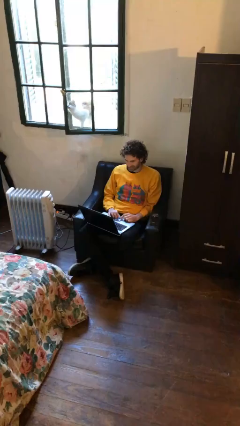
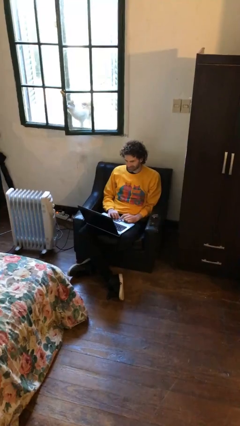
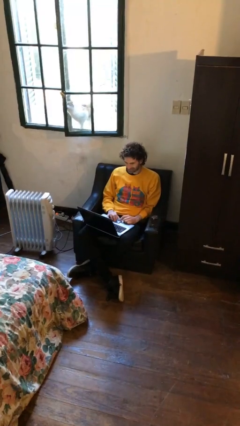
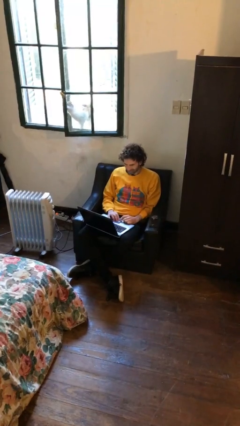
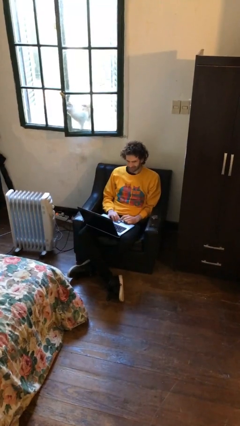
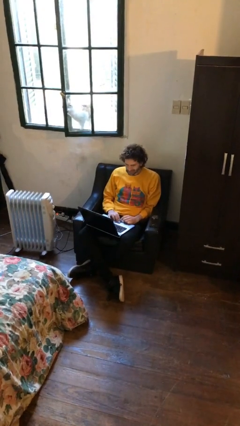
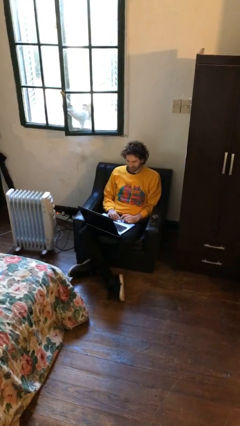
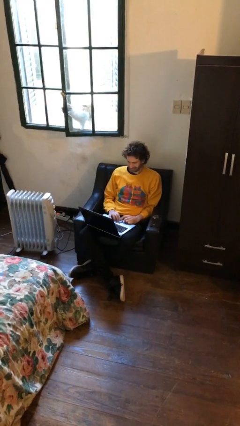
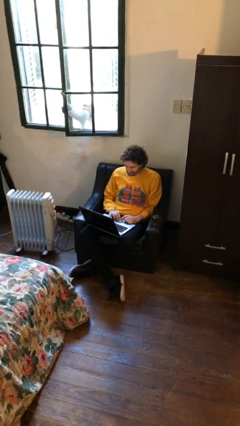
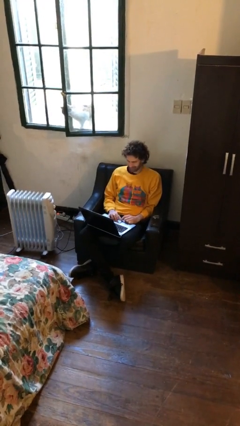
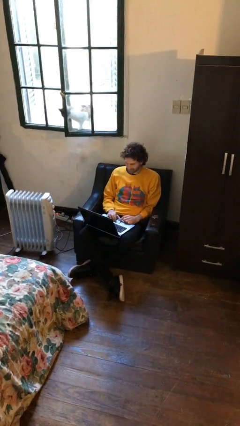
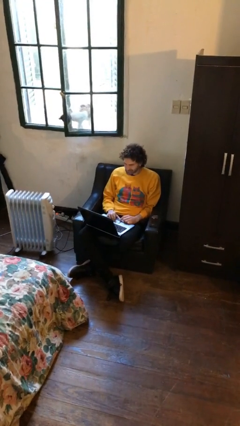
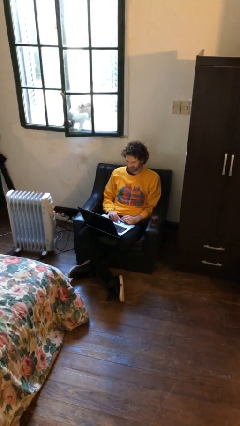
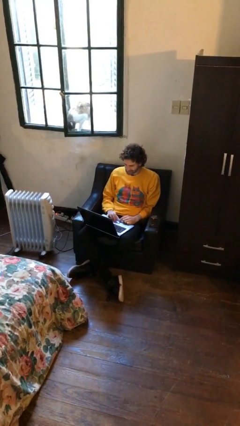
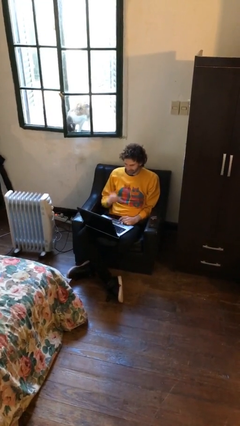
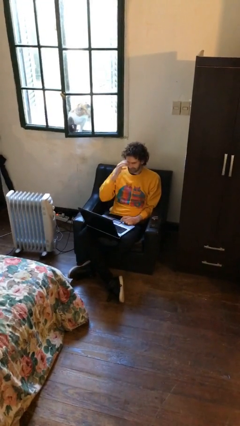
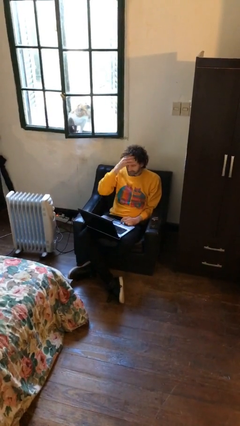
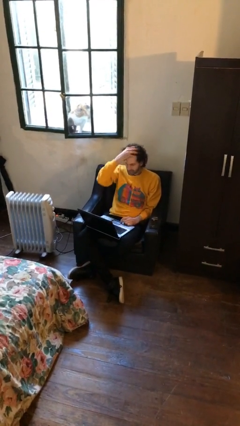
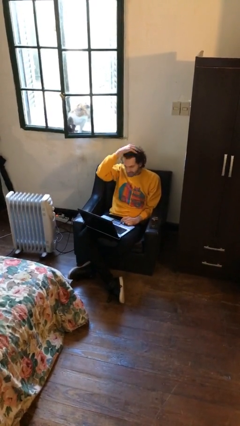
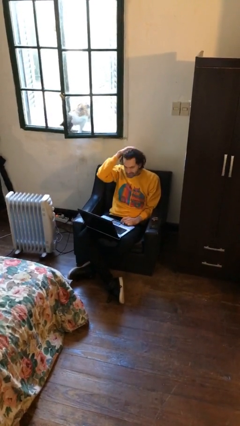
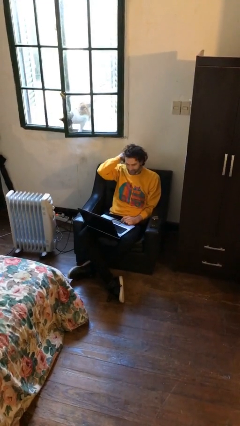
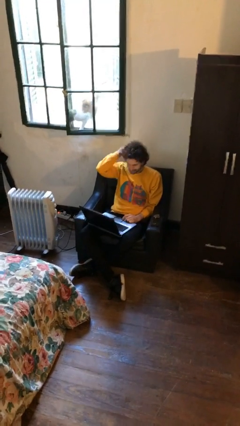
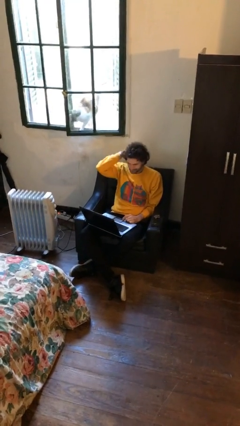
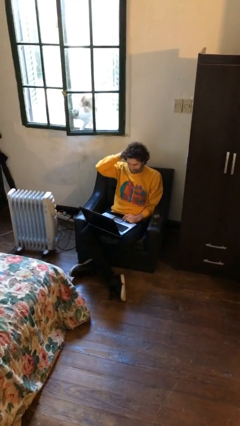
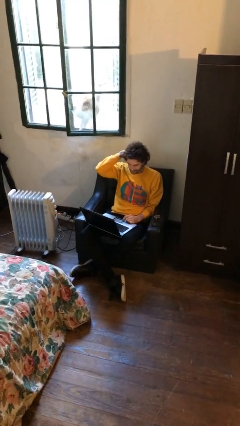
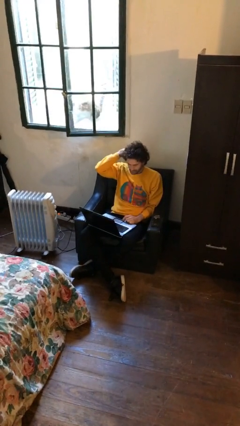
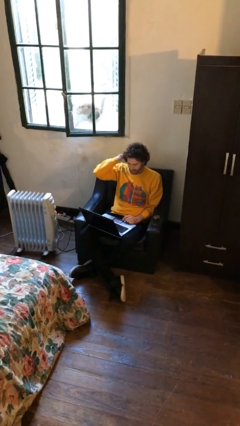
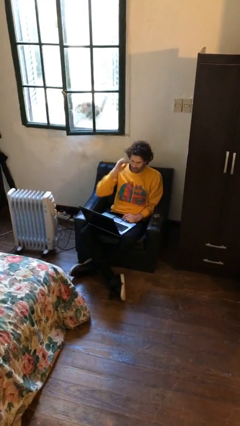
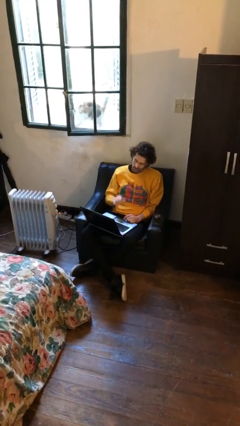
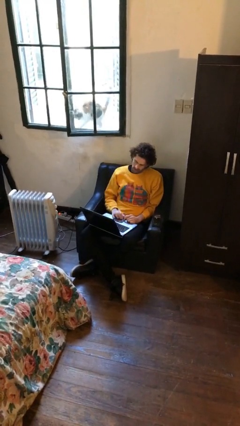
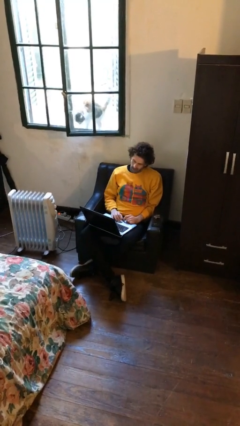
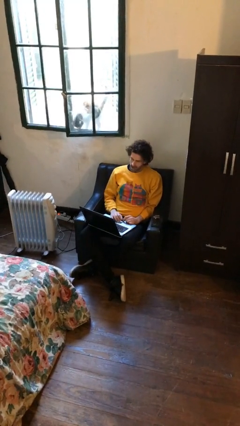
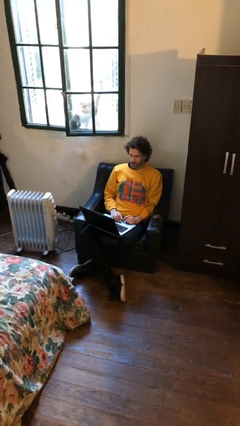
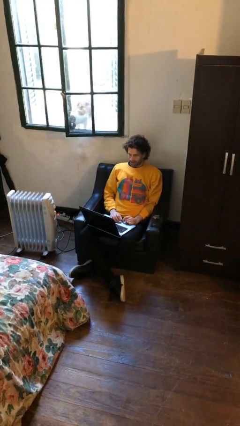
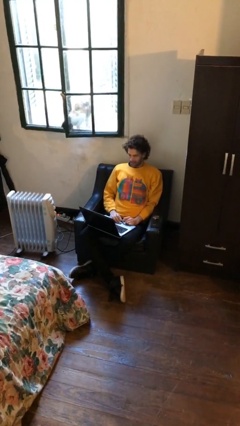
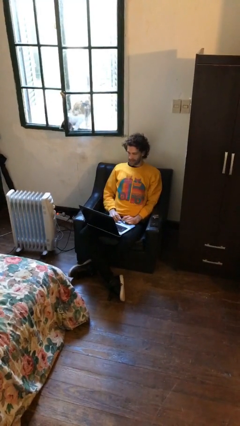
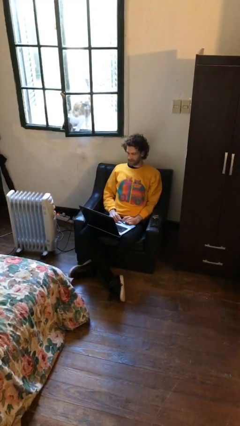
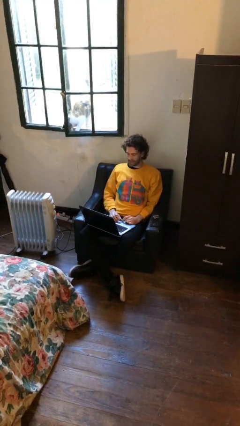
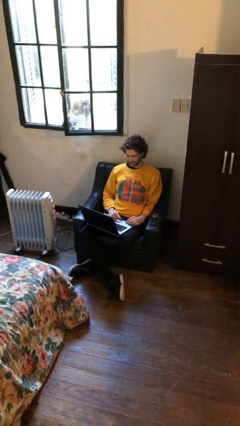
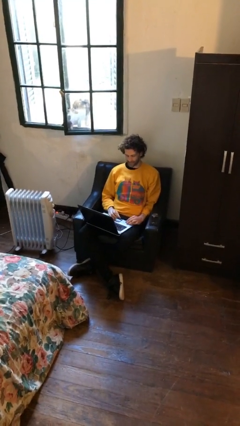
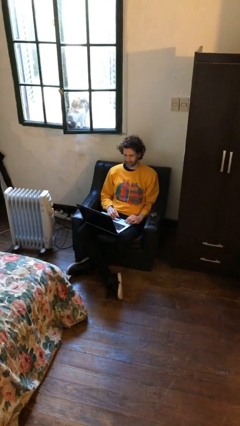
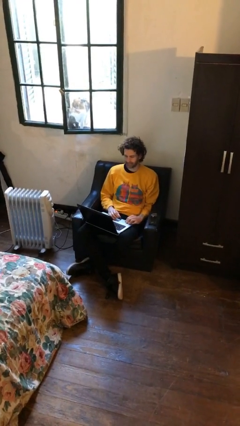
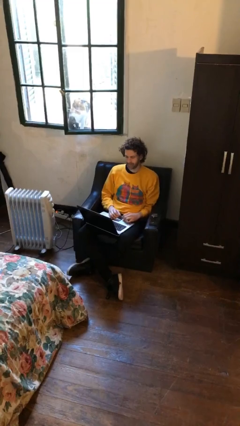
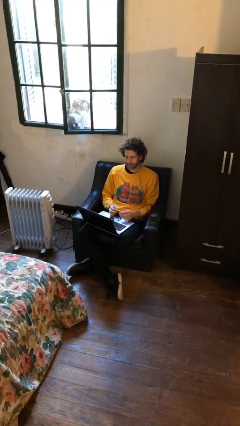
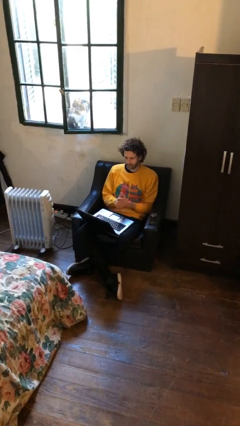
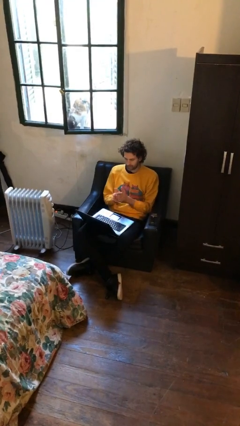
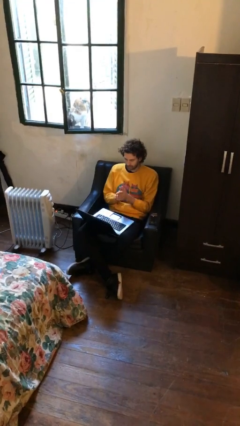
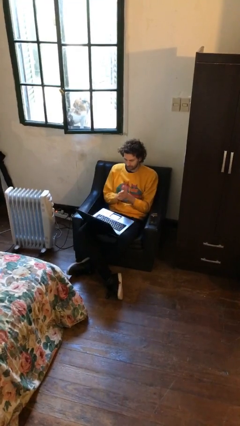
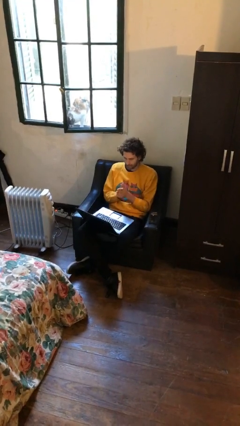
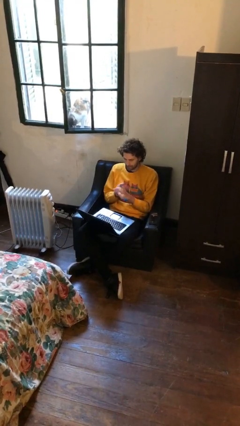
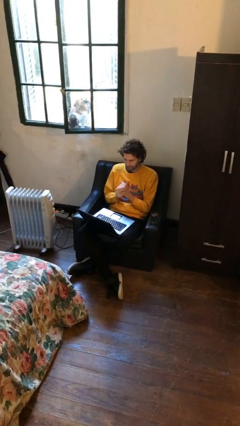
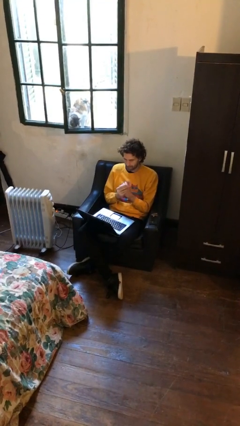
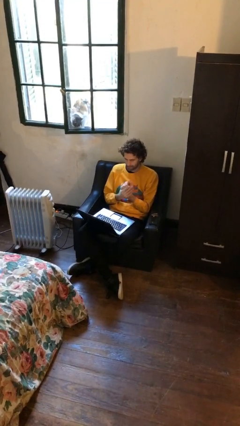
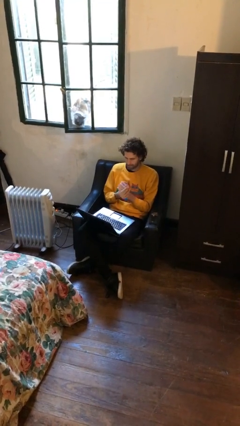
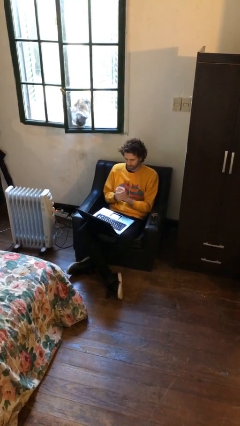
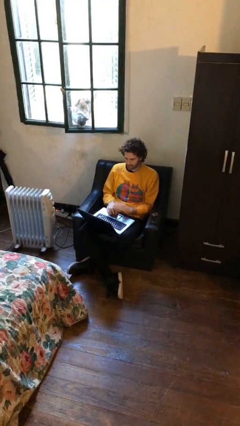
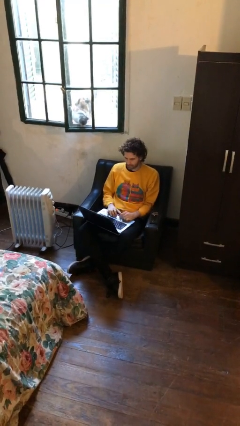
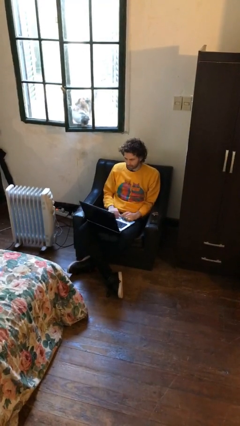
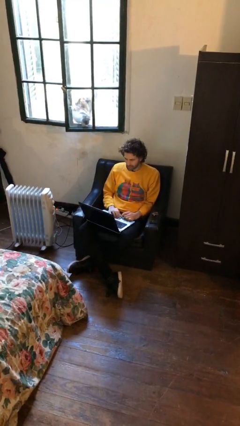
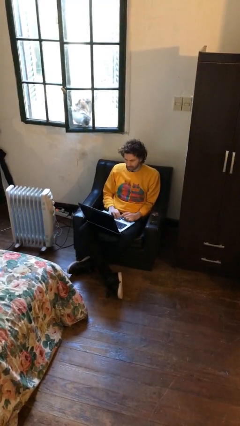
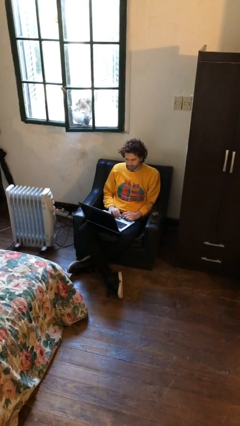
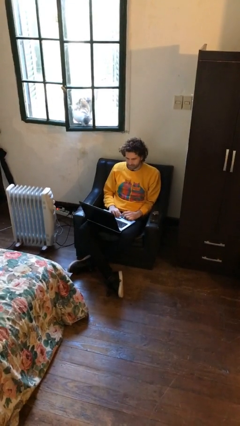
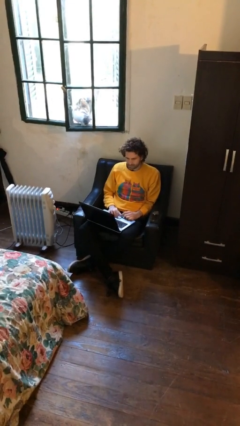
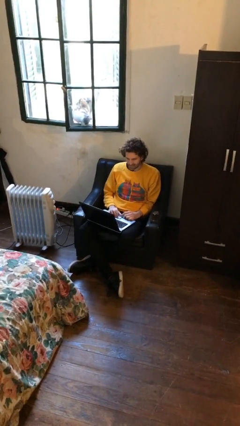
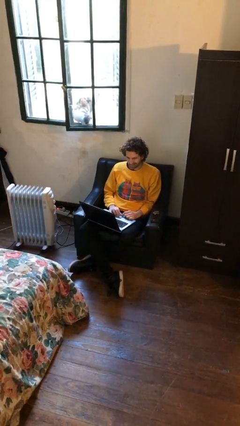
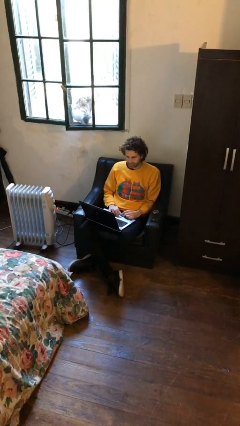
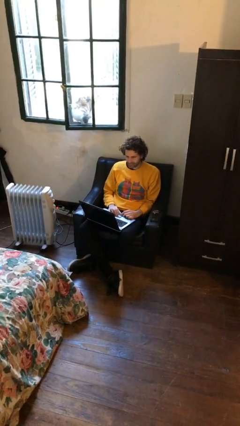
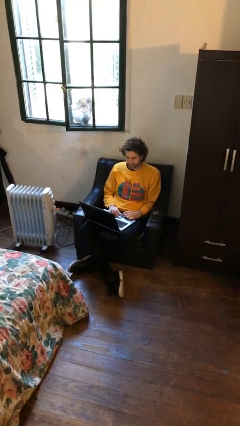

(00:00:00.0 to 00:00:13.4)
person interacts with laptop

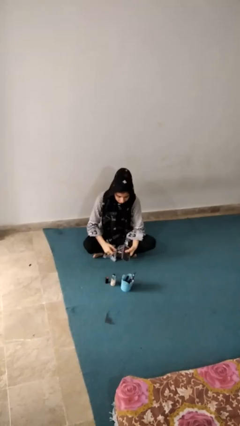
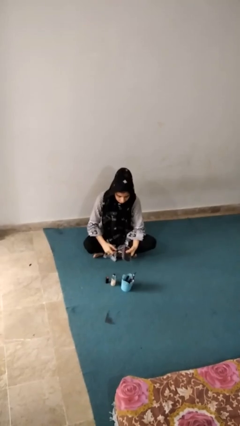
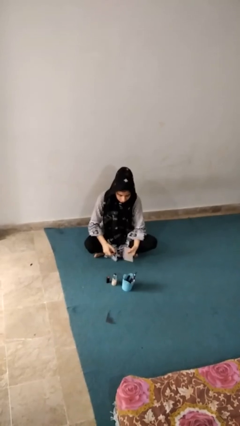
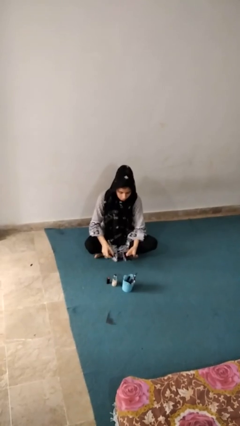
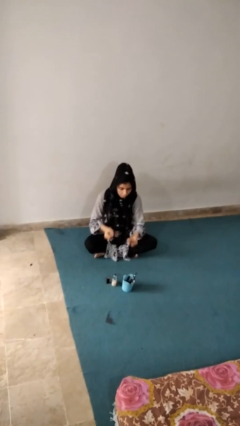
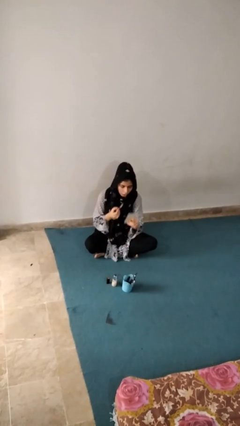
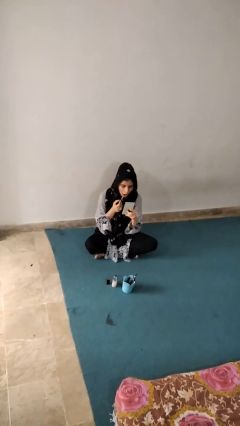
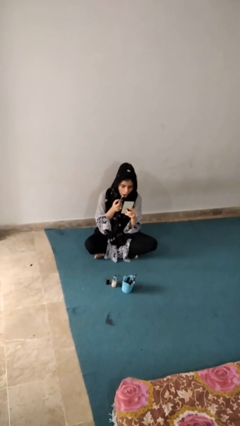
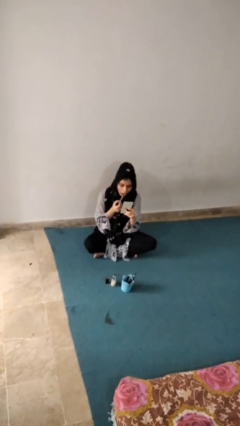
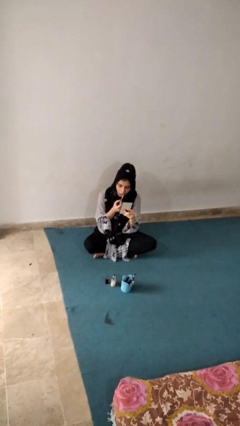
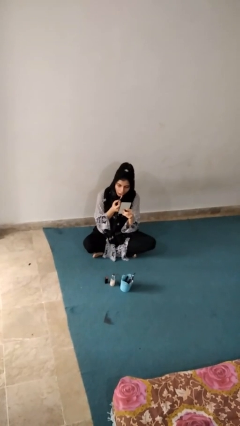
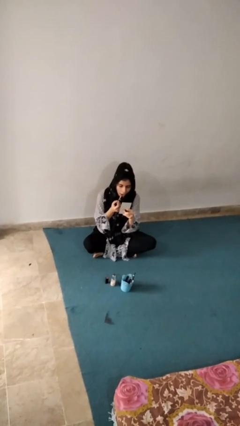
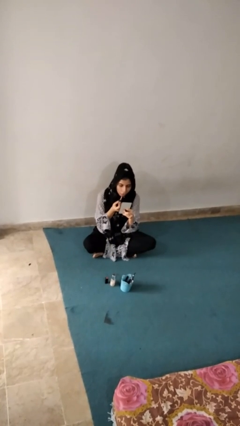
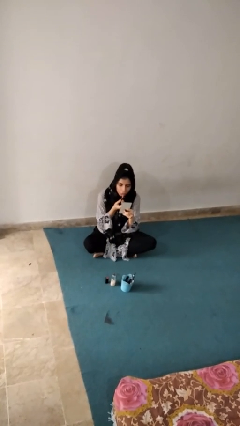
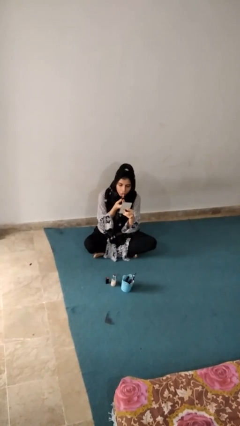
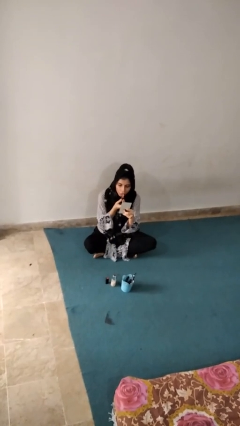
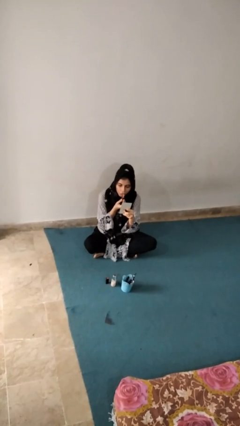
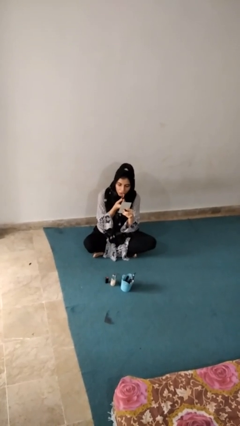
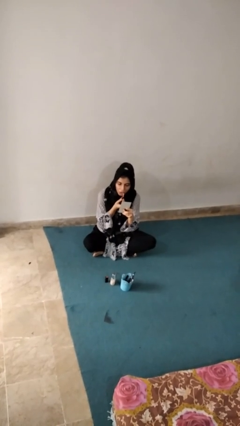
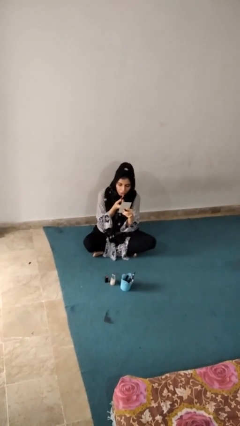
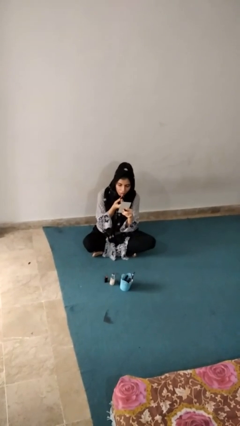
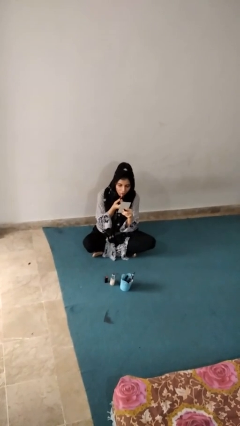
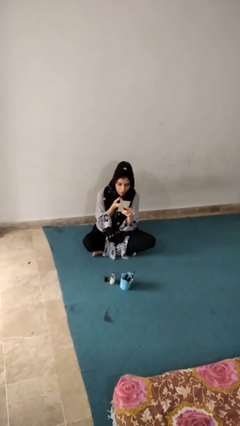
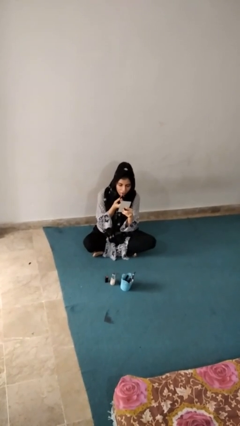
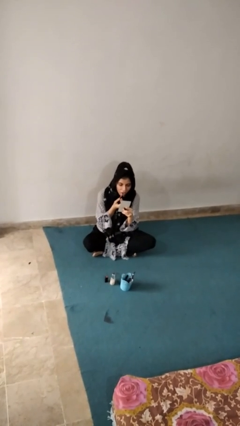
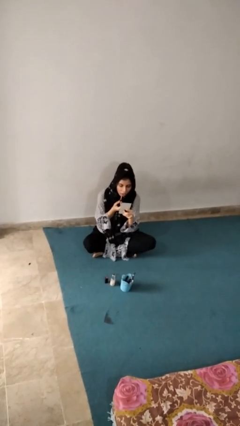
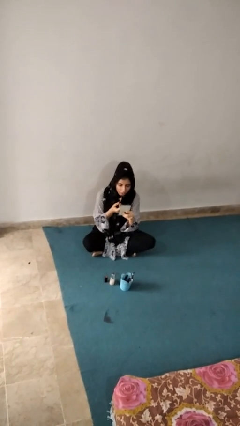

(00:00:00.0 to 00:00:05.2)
person applies lip makeup
